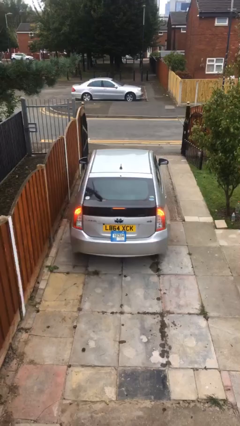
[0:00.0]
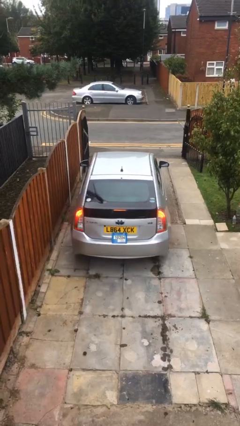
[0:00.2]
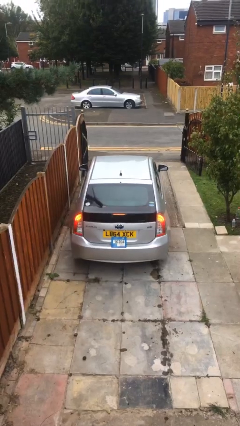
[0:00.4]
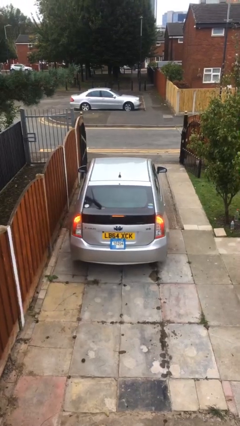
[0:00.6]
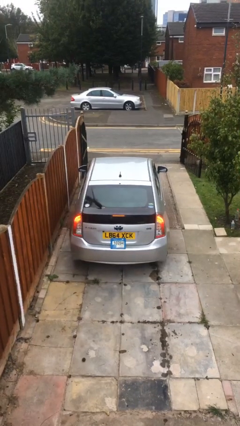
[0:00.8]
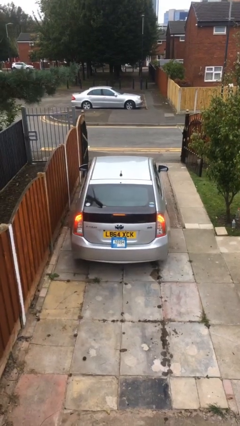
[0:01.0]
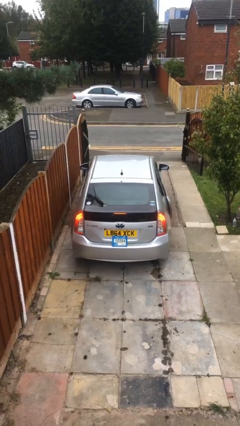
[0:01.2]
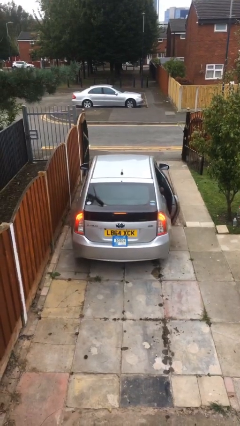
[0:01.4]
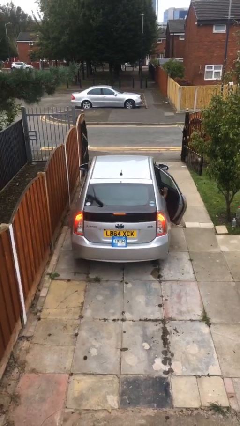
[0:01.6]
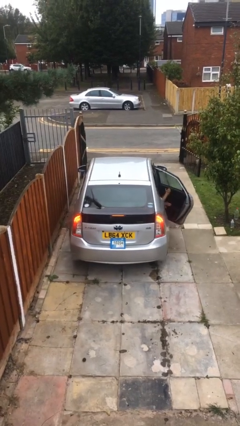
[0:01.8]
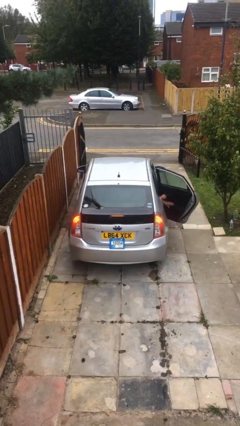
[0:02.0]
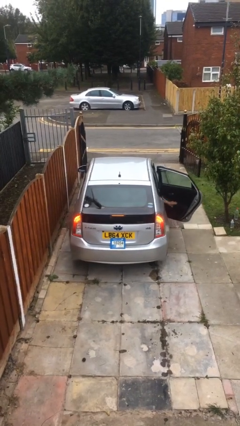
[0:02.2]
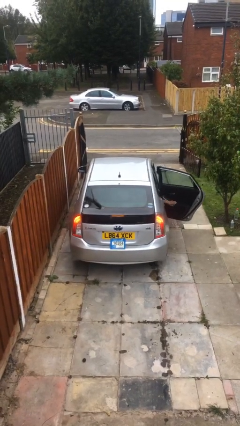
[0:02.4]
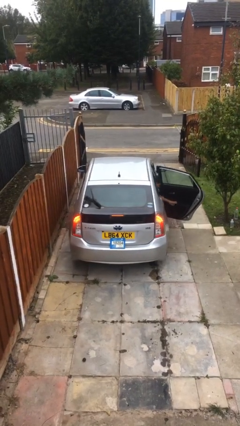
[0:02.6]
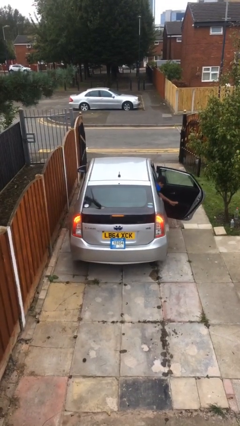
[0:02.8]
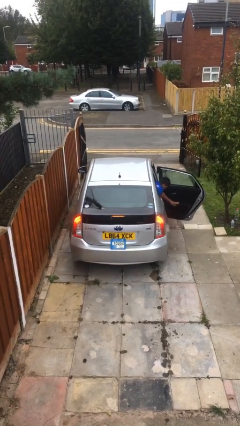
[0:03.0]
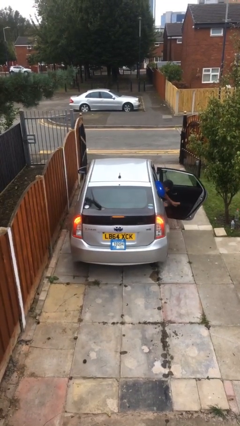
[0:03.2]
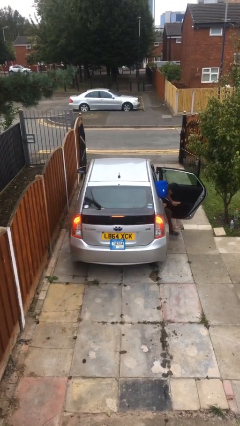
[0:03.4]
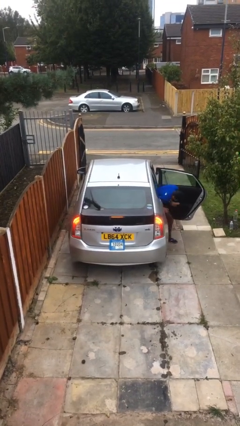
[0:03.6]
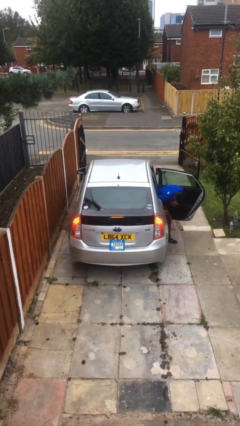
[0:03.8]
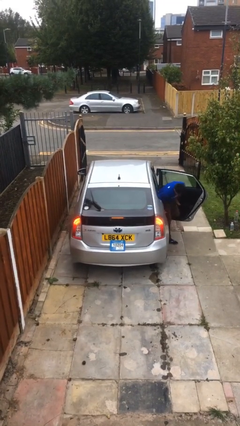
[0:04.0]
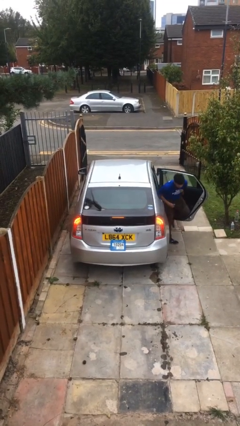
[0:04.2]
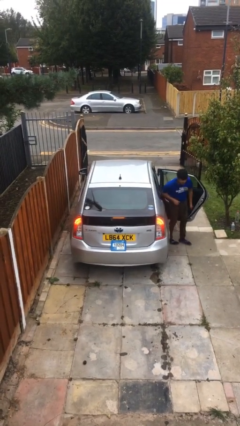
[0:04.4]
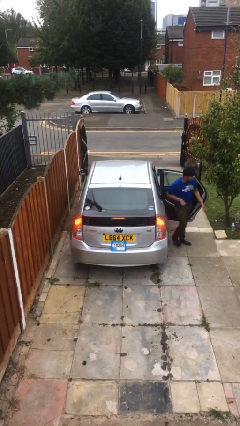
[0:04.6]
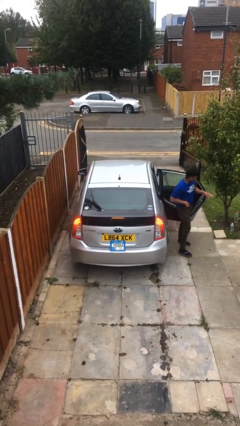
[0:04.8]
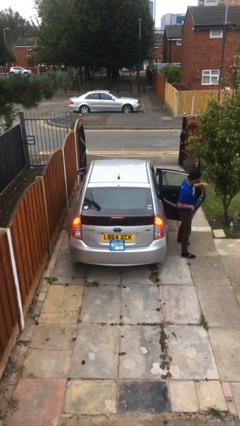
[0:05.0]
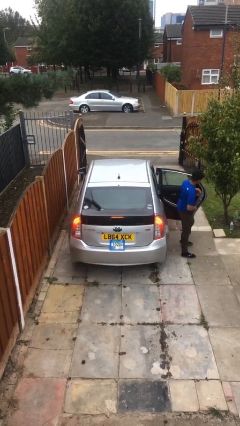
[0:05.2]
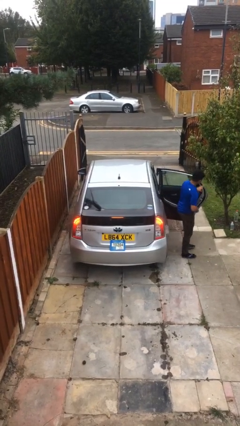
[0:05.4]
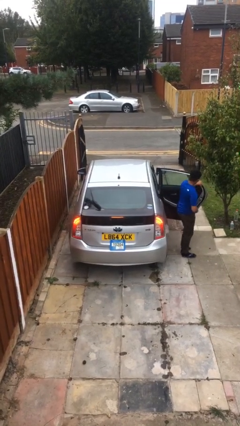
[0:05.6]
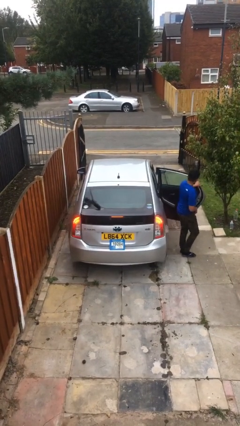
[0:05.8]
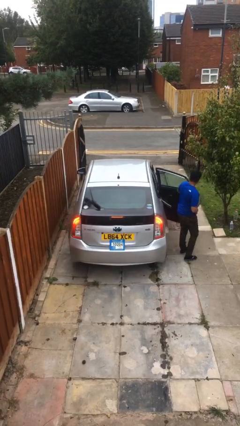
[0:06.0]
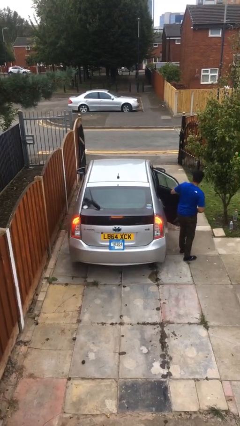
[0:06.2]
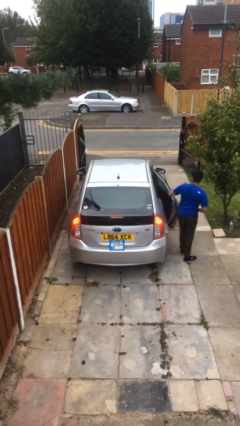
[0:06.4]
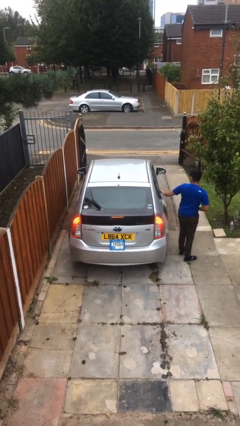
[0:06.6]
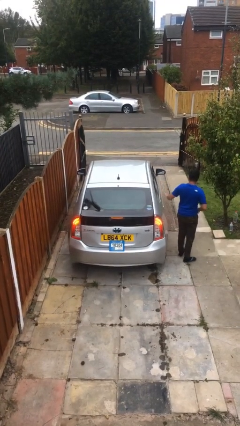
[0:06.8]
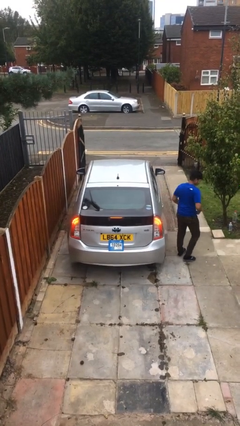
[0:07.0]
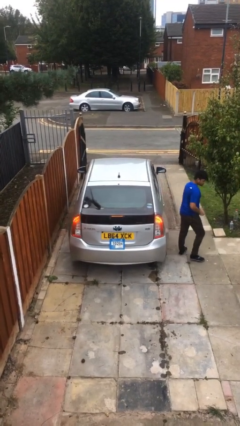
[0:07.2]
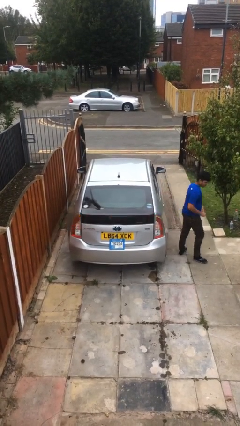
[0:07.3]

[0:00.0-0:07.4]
car drops off person

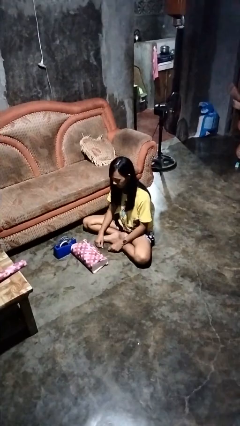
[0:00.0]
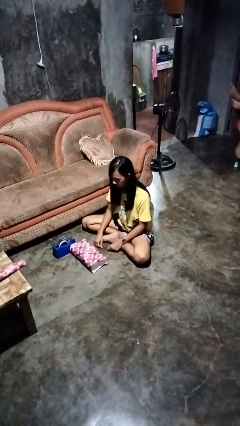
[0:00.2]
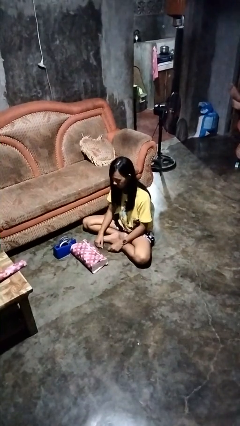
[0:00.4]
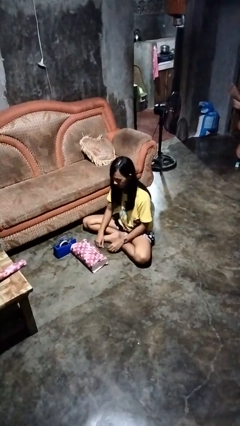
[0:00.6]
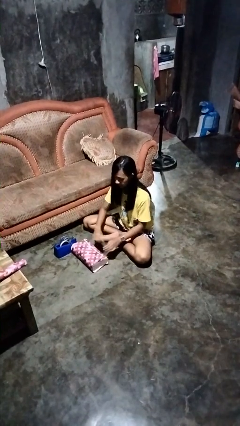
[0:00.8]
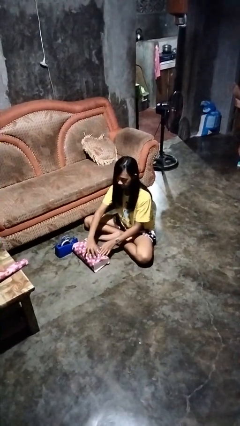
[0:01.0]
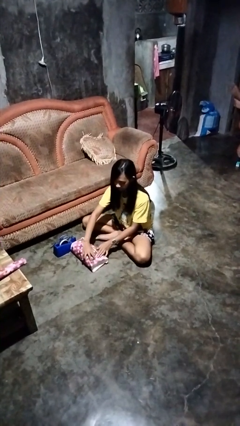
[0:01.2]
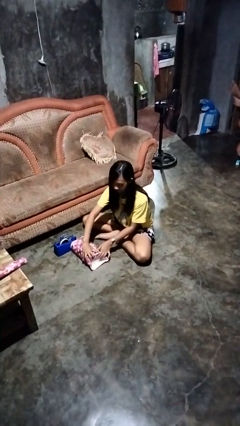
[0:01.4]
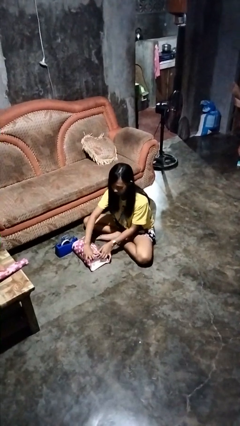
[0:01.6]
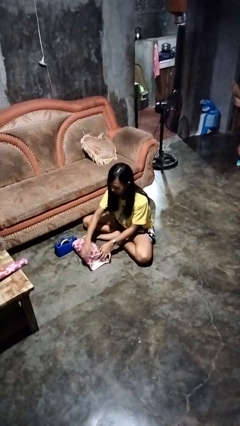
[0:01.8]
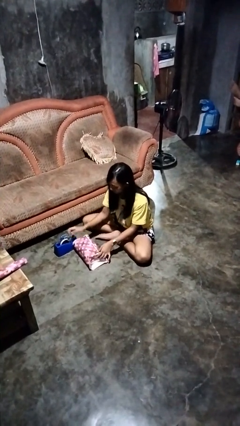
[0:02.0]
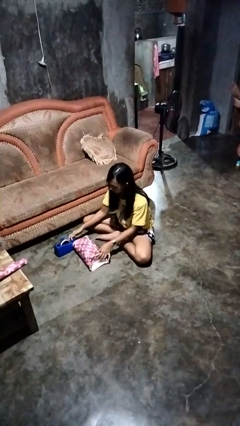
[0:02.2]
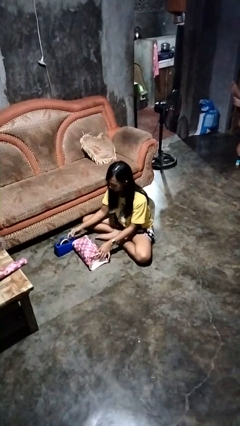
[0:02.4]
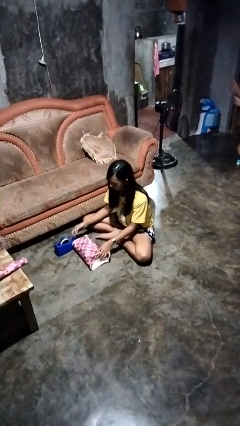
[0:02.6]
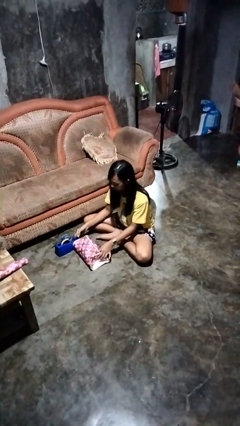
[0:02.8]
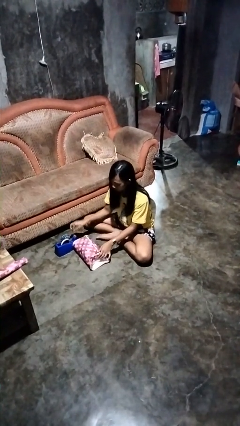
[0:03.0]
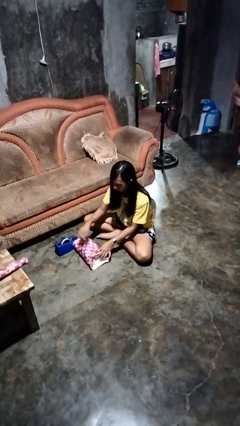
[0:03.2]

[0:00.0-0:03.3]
person wraps box

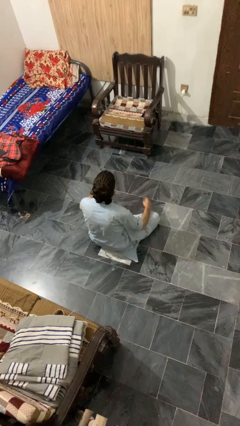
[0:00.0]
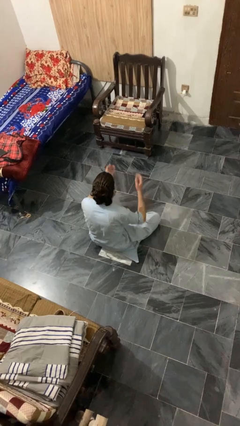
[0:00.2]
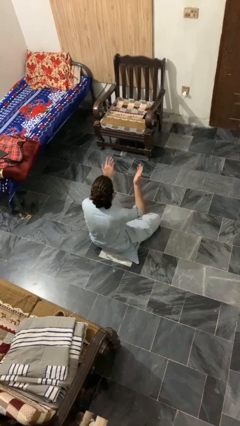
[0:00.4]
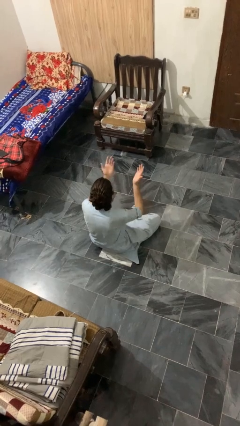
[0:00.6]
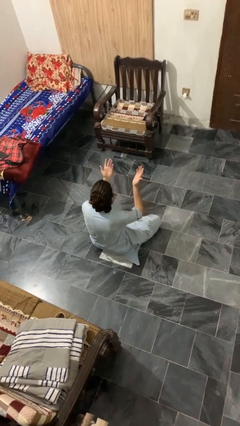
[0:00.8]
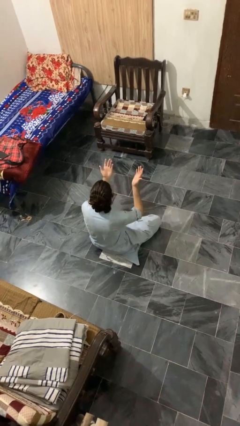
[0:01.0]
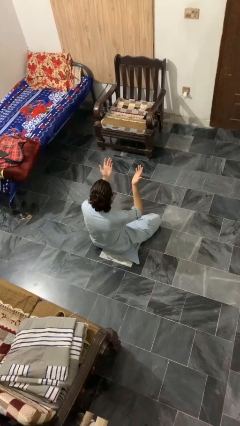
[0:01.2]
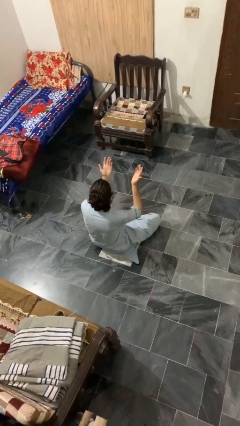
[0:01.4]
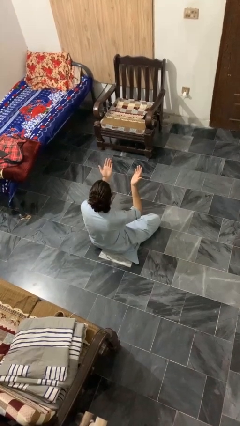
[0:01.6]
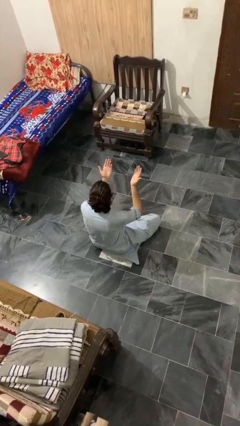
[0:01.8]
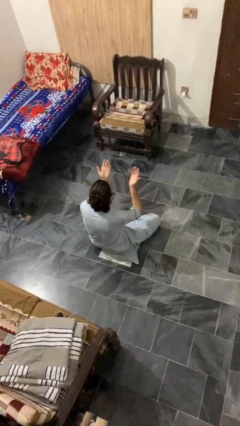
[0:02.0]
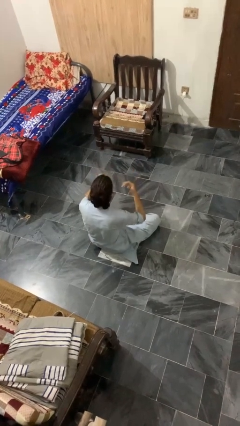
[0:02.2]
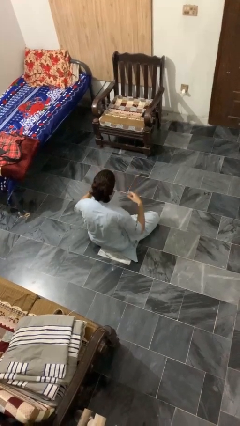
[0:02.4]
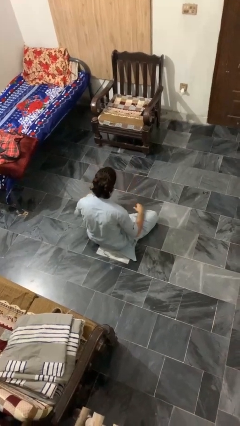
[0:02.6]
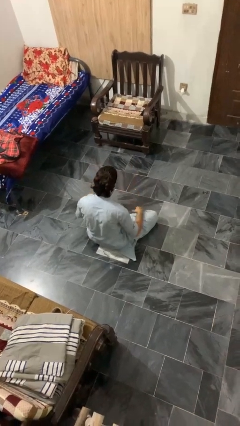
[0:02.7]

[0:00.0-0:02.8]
person prays

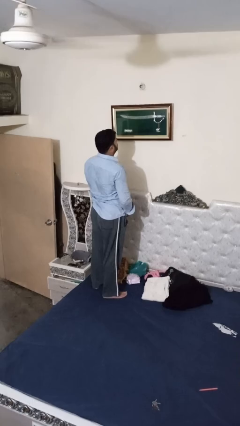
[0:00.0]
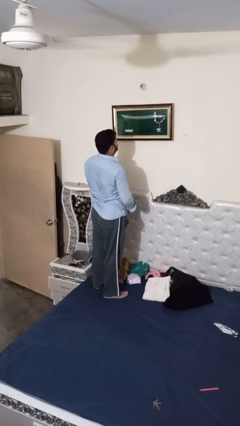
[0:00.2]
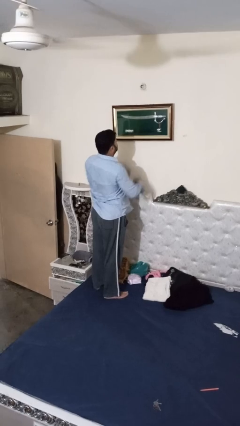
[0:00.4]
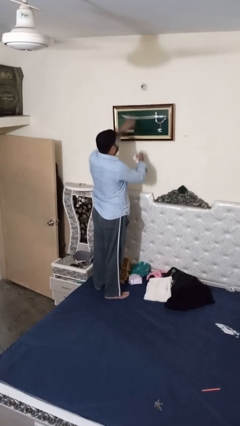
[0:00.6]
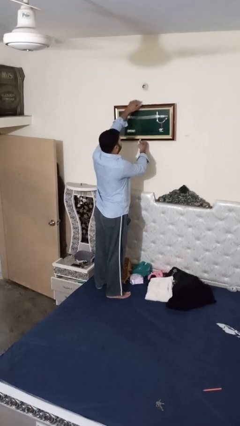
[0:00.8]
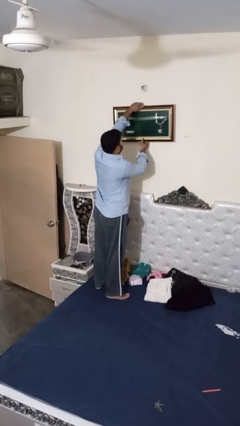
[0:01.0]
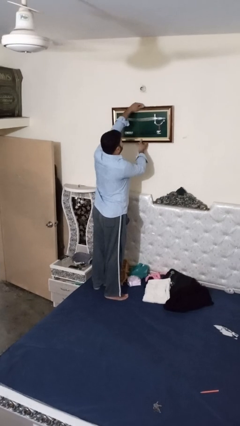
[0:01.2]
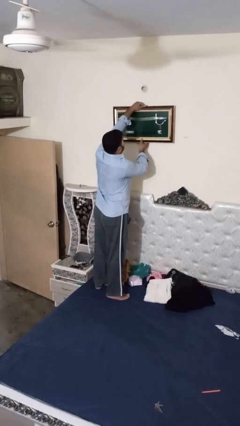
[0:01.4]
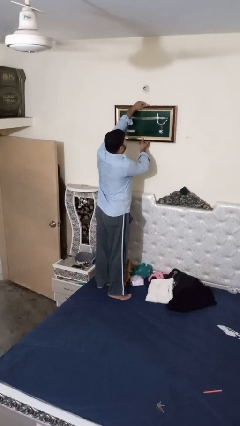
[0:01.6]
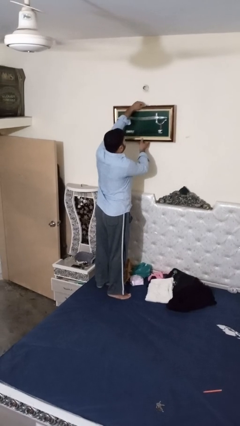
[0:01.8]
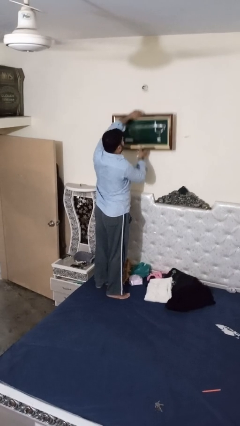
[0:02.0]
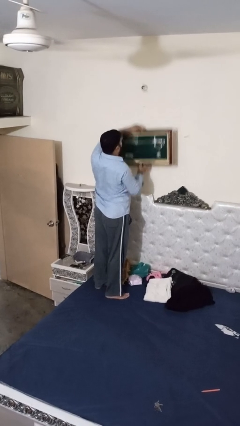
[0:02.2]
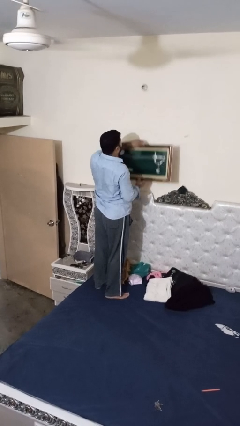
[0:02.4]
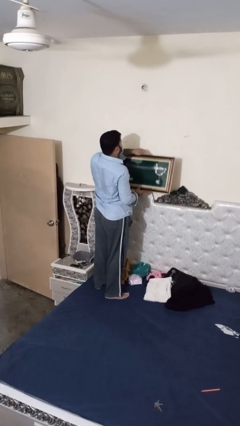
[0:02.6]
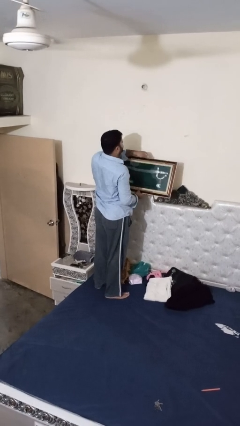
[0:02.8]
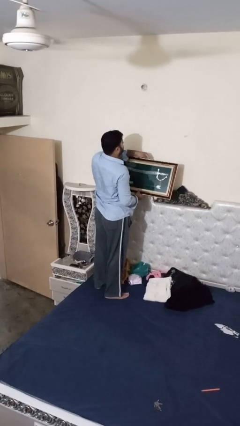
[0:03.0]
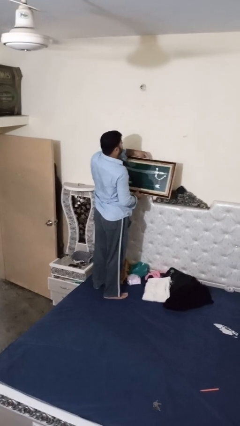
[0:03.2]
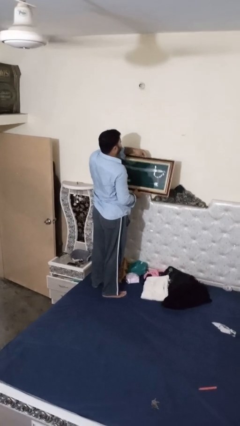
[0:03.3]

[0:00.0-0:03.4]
person takes down picture frame

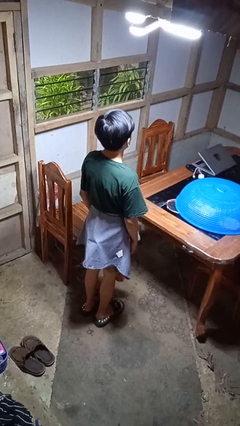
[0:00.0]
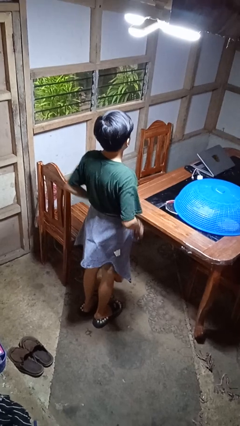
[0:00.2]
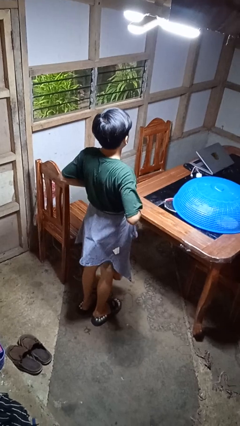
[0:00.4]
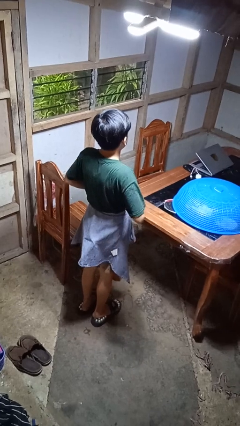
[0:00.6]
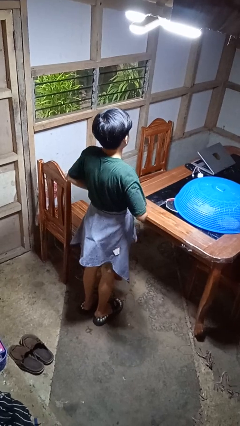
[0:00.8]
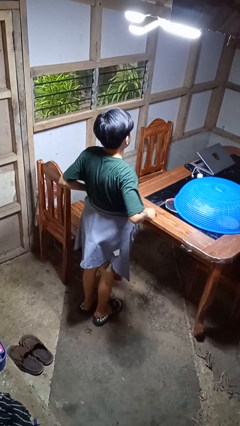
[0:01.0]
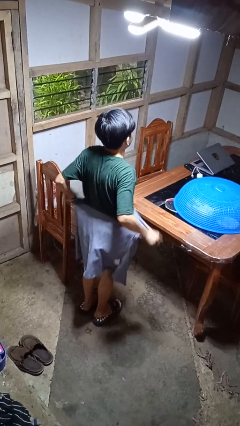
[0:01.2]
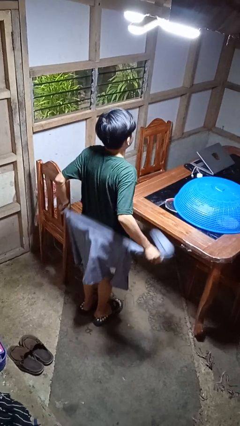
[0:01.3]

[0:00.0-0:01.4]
person unties jacket around waist
